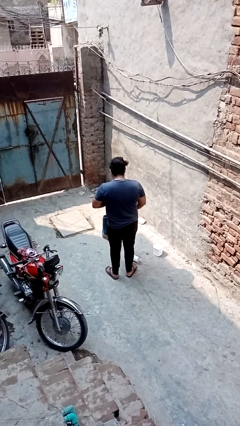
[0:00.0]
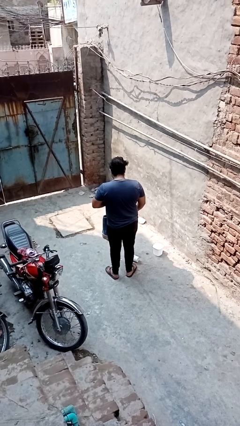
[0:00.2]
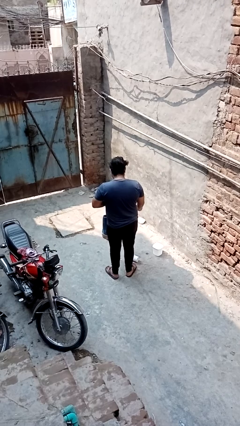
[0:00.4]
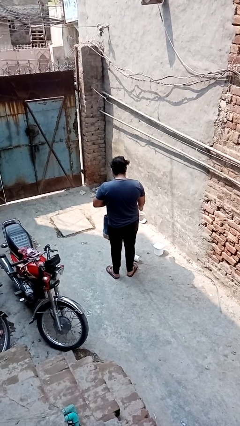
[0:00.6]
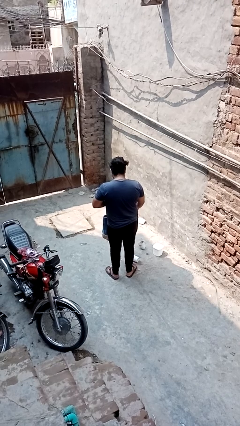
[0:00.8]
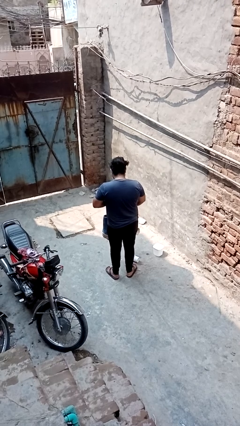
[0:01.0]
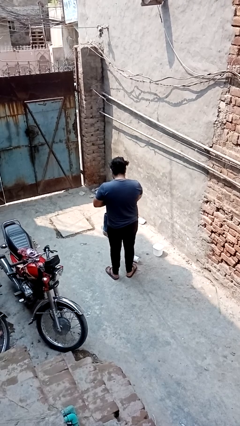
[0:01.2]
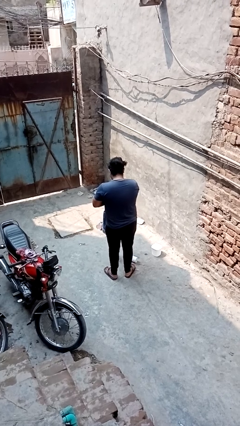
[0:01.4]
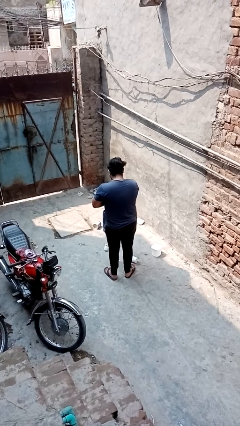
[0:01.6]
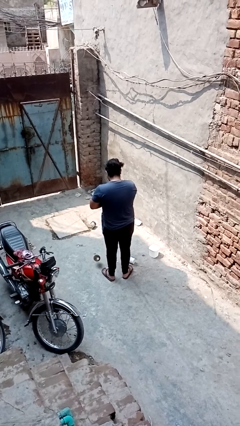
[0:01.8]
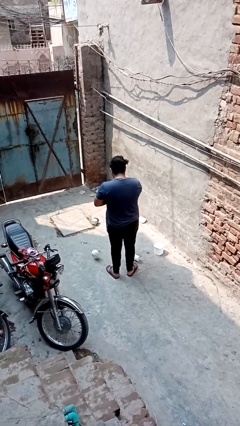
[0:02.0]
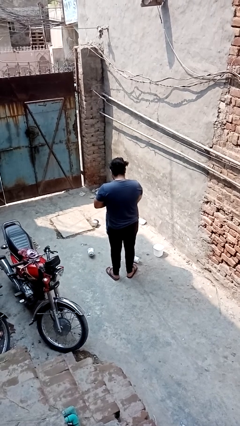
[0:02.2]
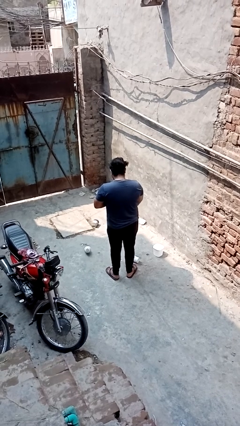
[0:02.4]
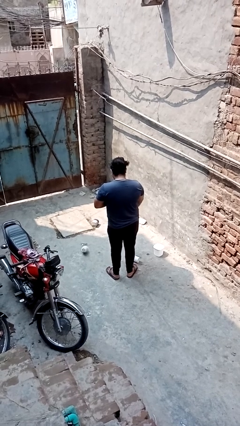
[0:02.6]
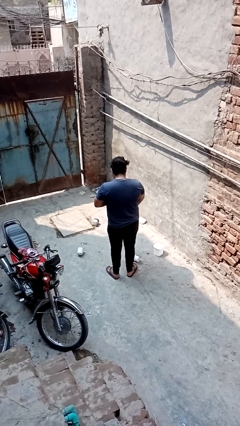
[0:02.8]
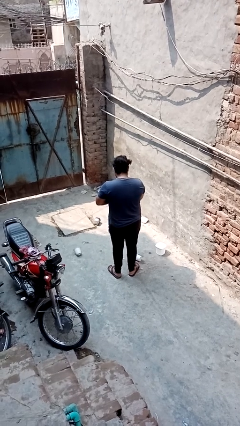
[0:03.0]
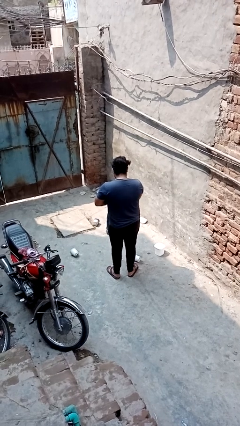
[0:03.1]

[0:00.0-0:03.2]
person cleans table with rag

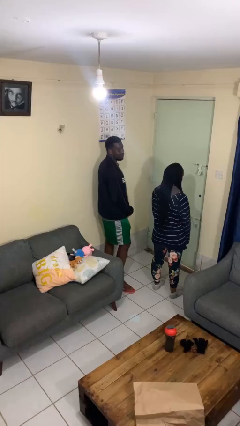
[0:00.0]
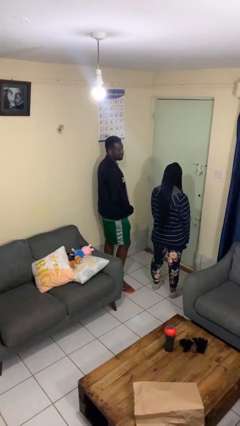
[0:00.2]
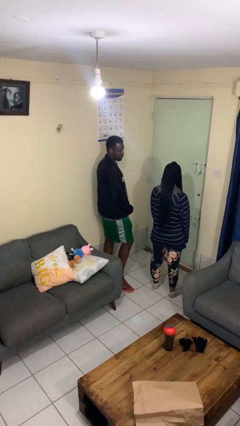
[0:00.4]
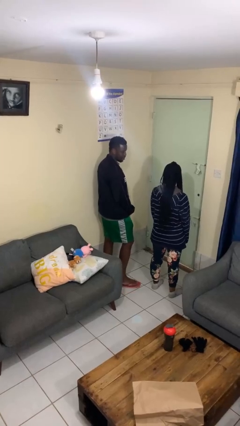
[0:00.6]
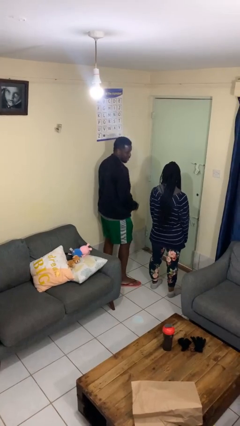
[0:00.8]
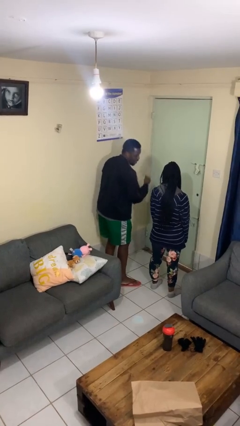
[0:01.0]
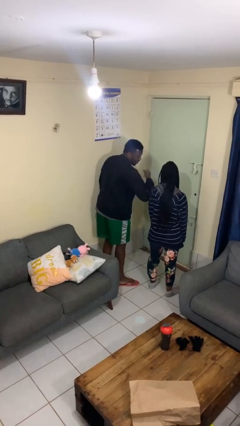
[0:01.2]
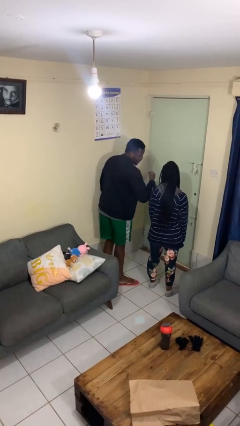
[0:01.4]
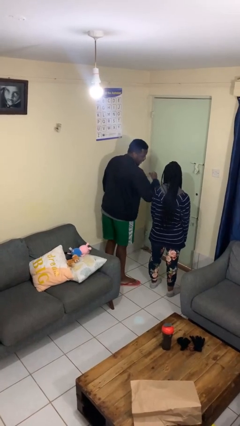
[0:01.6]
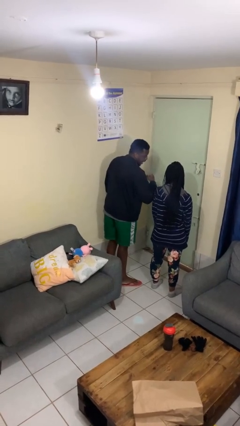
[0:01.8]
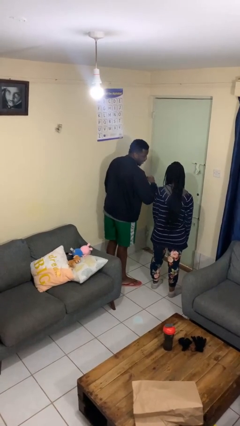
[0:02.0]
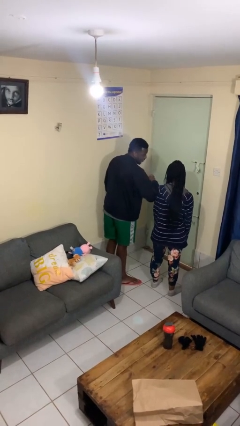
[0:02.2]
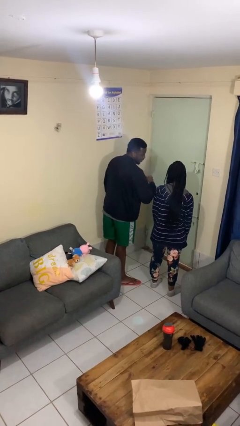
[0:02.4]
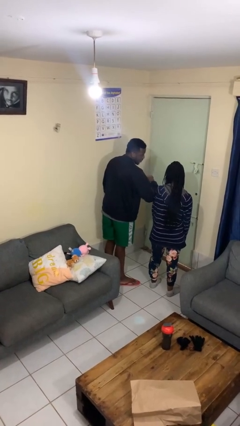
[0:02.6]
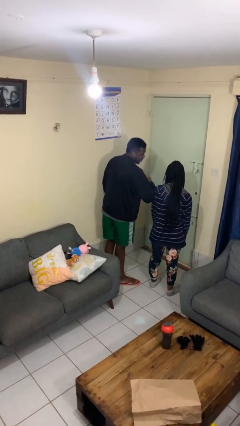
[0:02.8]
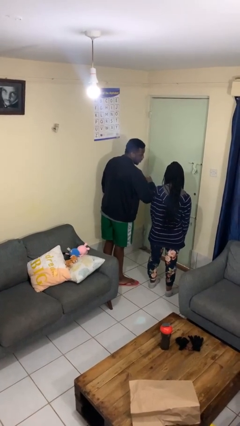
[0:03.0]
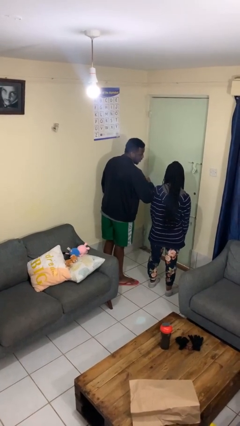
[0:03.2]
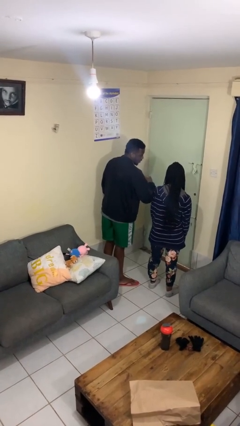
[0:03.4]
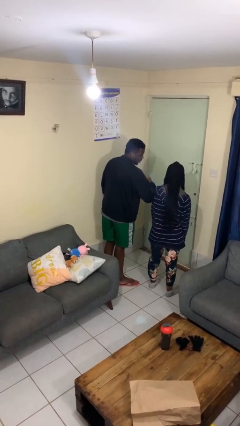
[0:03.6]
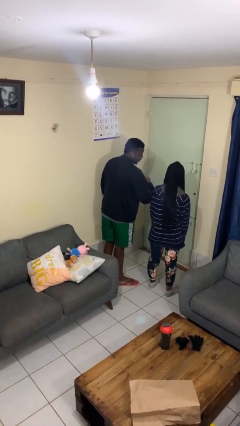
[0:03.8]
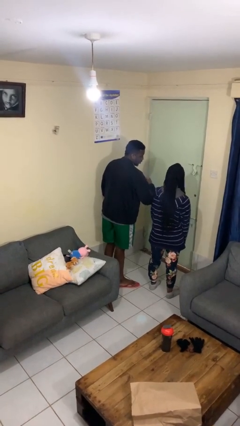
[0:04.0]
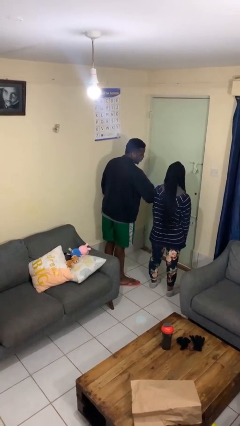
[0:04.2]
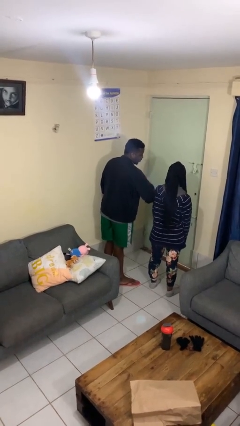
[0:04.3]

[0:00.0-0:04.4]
person nudges person with elbow

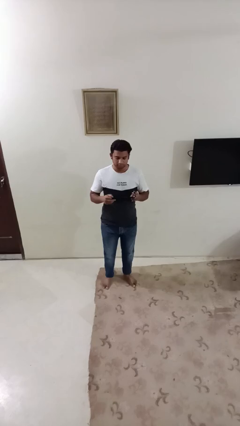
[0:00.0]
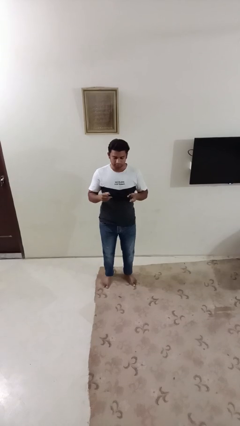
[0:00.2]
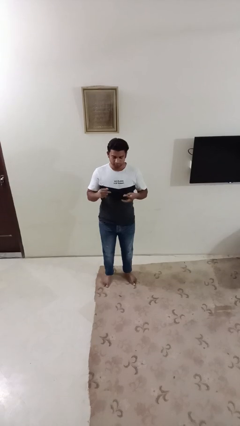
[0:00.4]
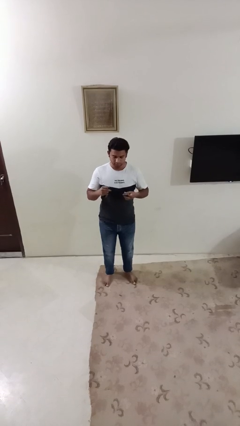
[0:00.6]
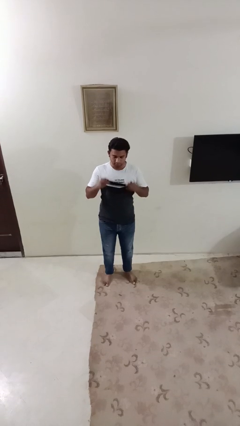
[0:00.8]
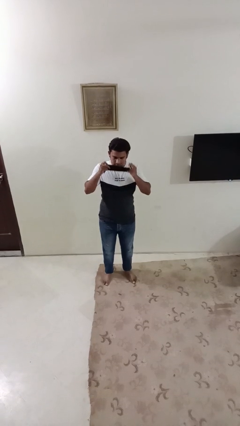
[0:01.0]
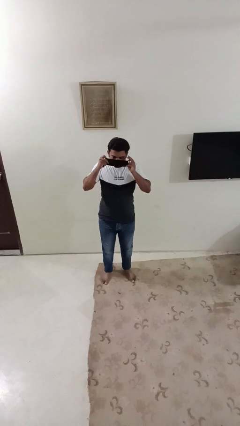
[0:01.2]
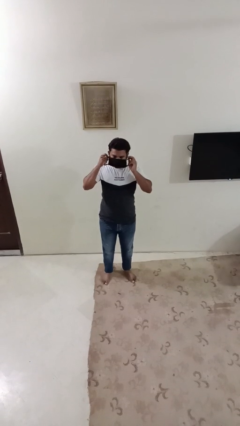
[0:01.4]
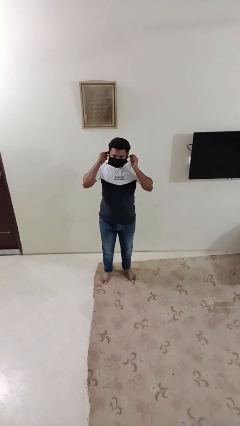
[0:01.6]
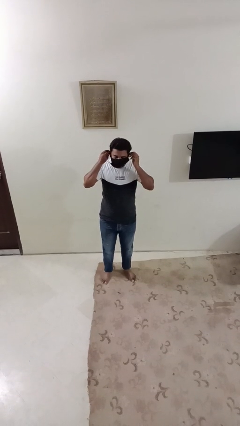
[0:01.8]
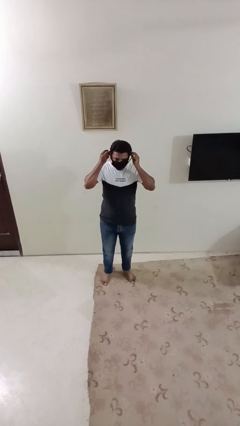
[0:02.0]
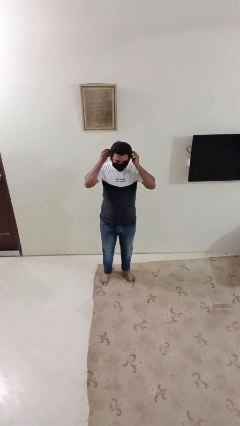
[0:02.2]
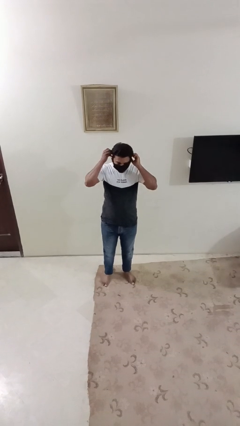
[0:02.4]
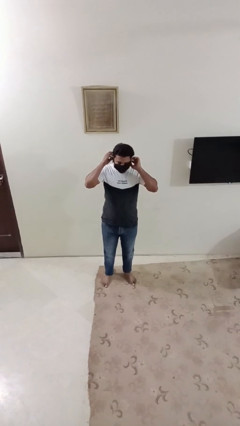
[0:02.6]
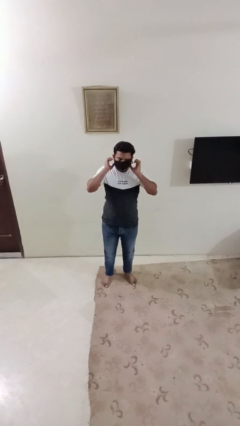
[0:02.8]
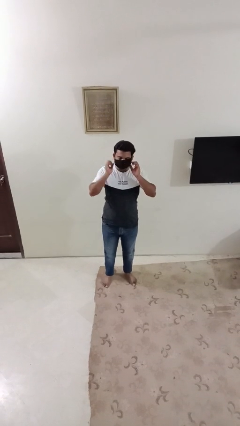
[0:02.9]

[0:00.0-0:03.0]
person puts on facemask

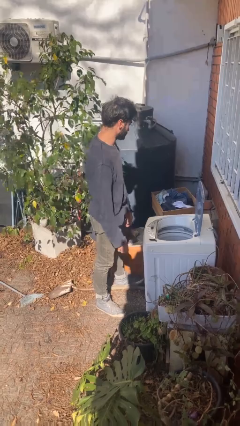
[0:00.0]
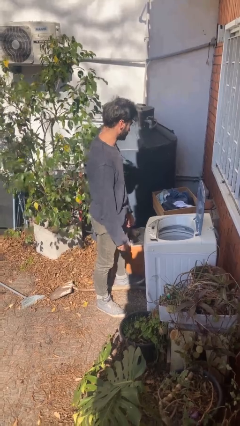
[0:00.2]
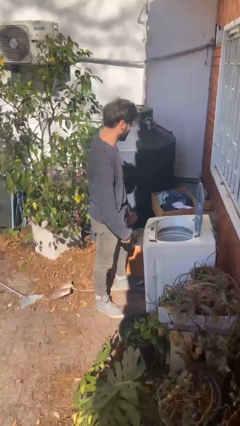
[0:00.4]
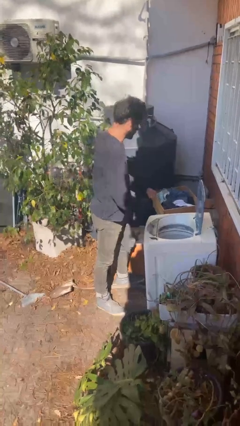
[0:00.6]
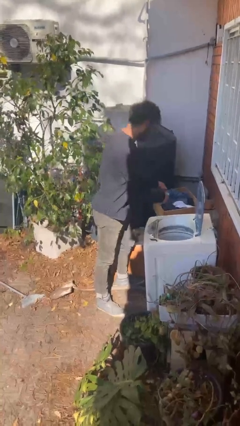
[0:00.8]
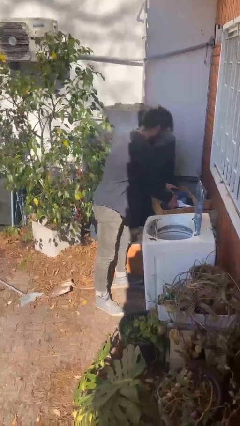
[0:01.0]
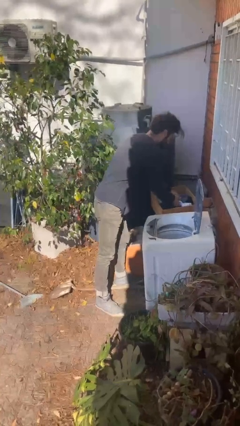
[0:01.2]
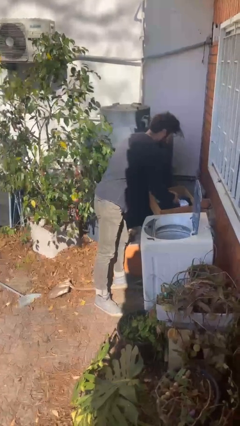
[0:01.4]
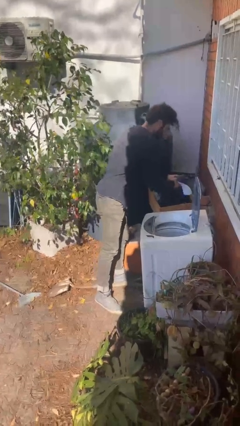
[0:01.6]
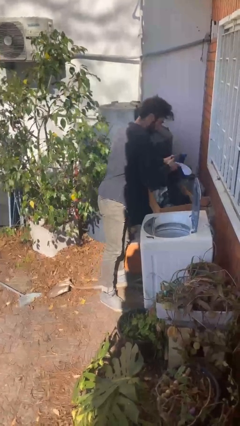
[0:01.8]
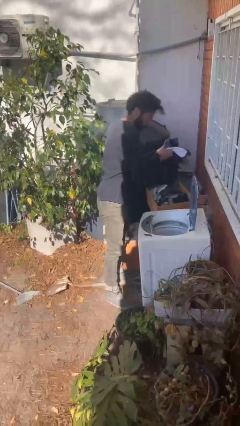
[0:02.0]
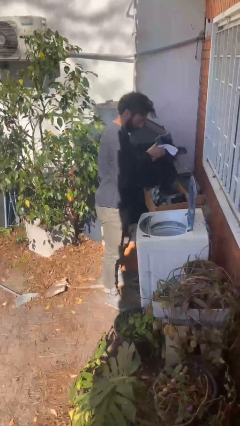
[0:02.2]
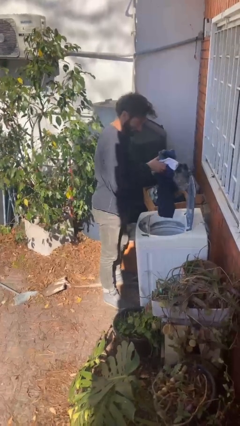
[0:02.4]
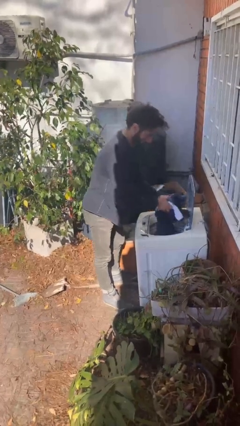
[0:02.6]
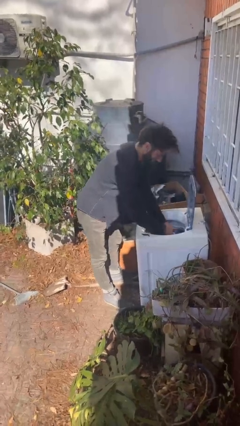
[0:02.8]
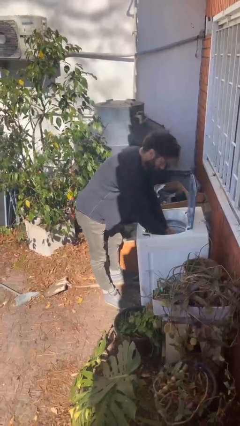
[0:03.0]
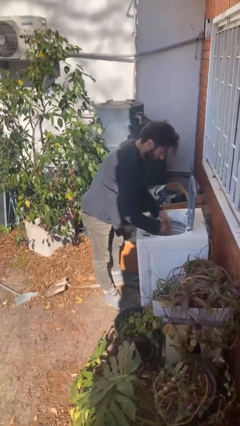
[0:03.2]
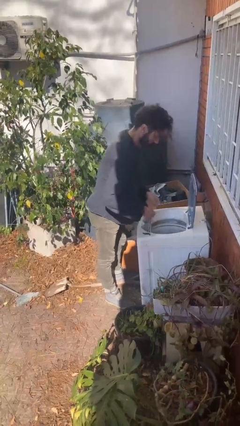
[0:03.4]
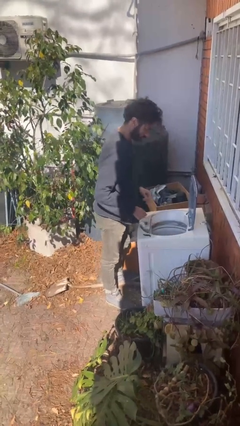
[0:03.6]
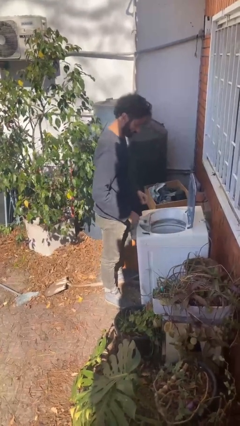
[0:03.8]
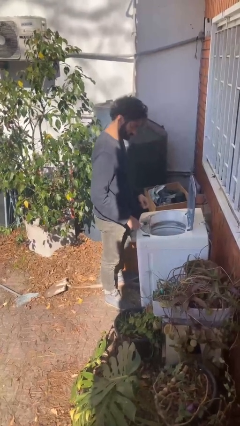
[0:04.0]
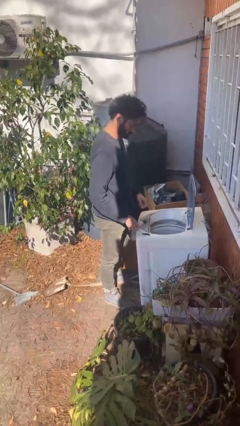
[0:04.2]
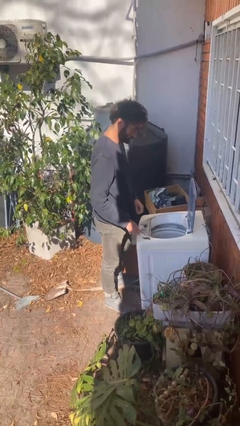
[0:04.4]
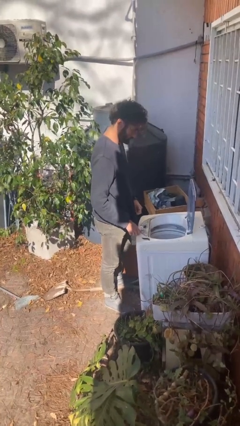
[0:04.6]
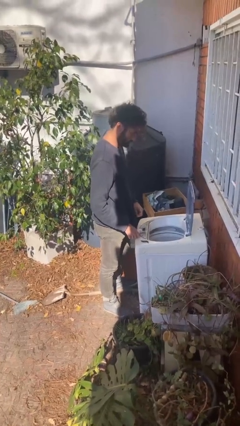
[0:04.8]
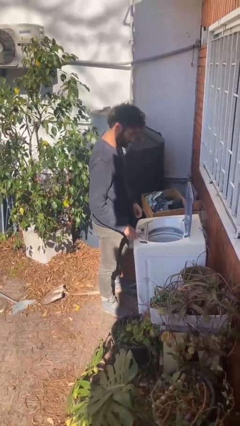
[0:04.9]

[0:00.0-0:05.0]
person loads clotheswasher

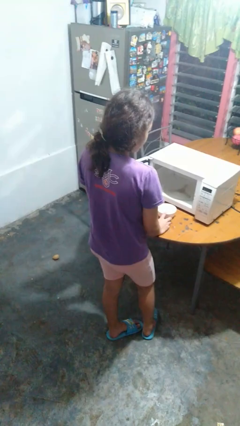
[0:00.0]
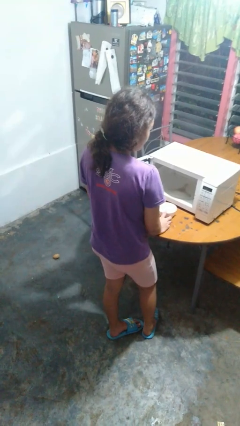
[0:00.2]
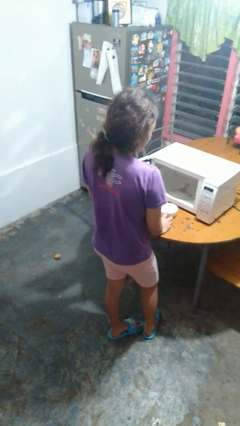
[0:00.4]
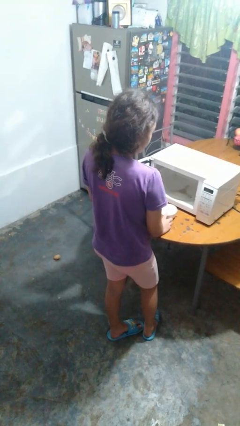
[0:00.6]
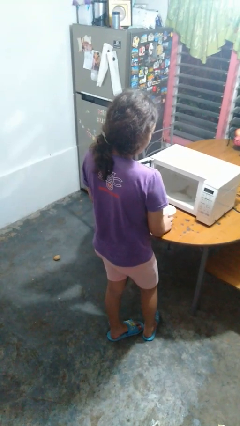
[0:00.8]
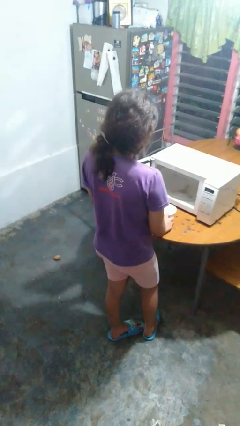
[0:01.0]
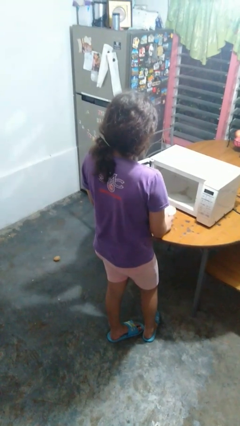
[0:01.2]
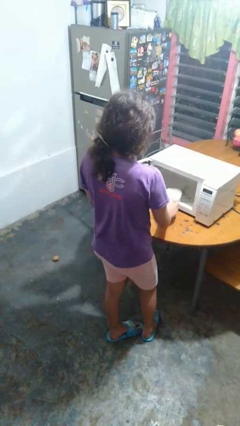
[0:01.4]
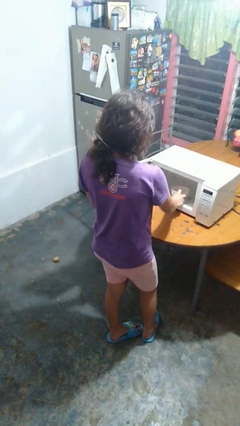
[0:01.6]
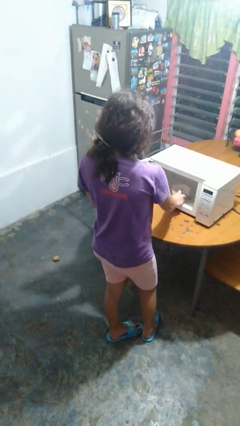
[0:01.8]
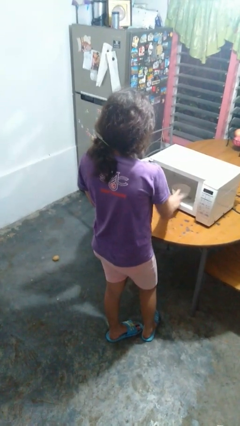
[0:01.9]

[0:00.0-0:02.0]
person puts object into microwave
